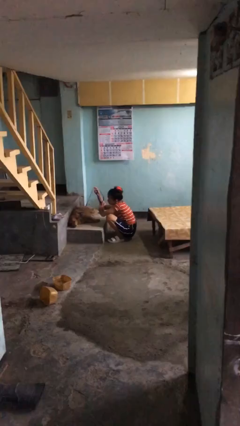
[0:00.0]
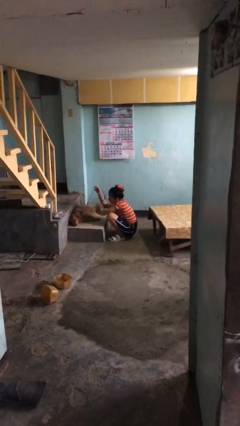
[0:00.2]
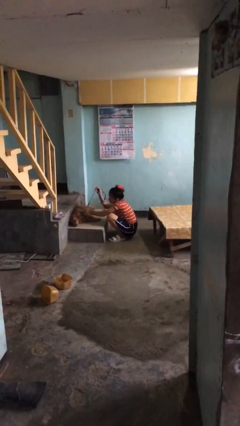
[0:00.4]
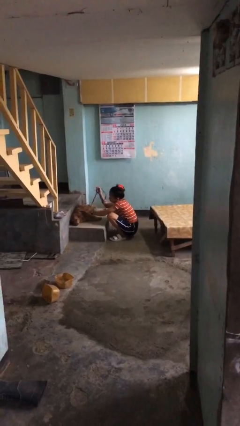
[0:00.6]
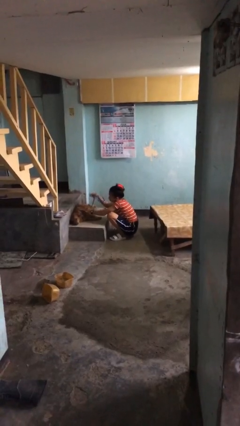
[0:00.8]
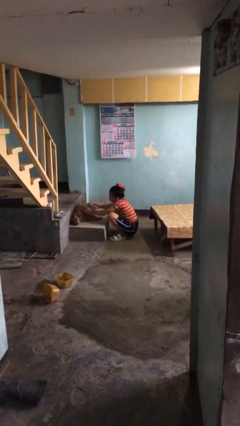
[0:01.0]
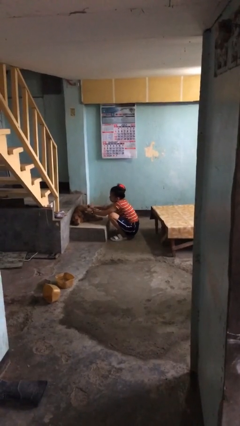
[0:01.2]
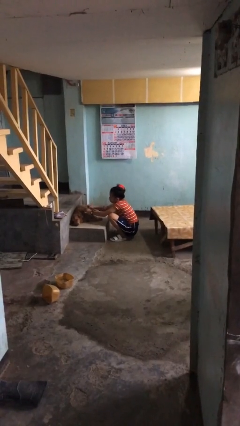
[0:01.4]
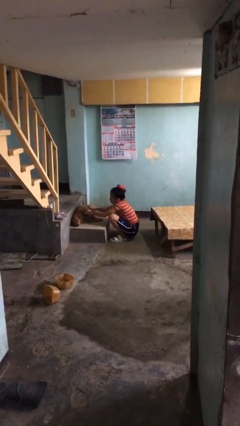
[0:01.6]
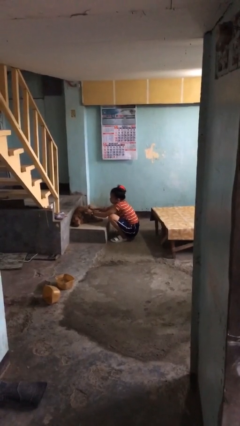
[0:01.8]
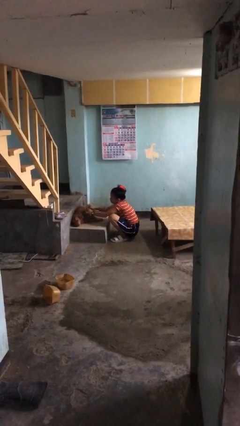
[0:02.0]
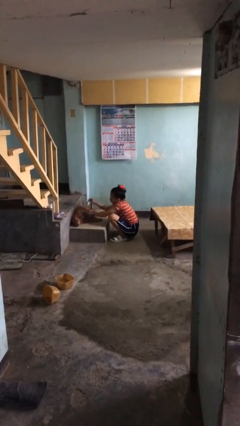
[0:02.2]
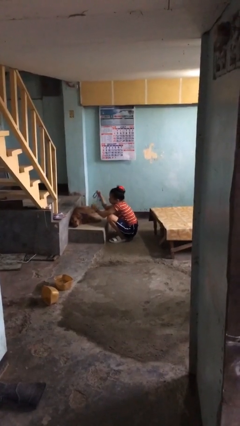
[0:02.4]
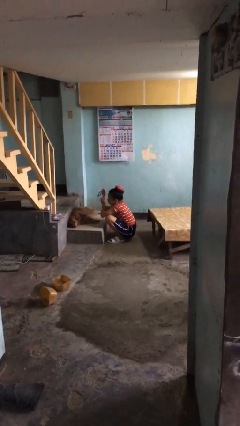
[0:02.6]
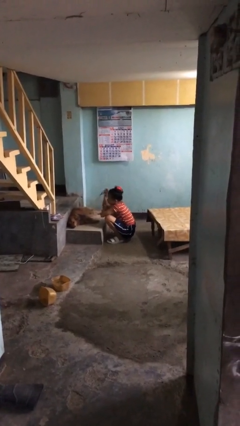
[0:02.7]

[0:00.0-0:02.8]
person unattaches leash from dog

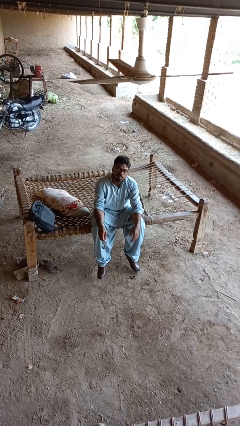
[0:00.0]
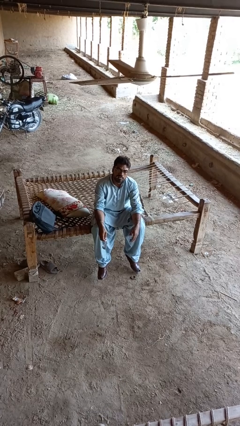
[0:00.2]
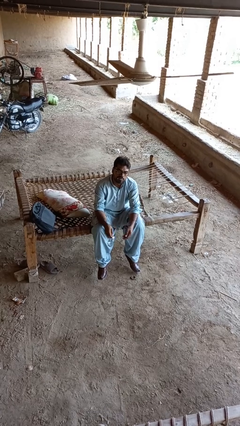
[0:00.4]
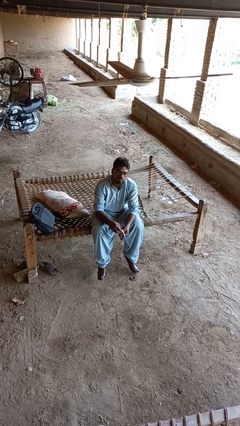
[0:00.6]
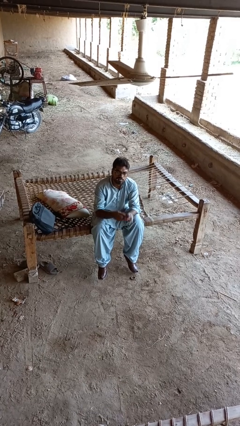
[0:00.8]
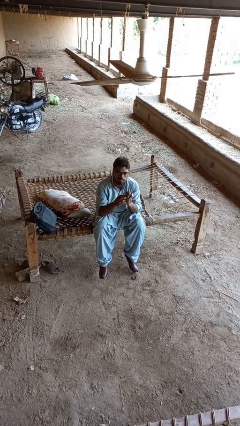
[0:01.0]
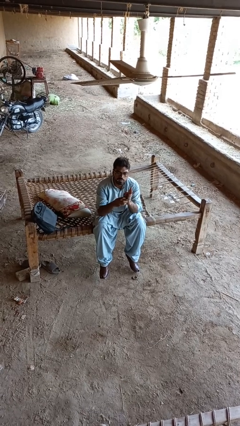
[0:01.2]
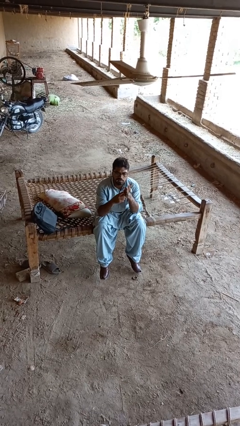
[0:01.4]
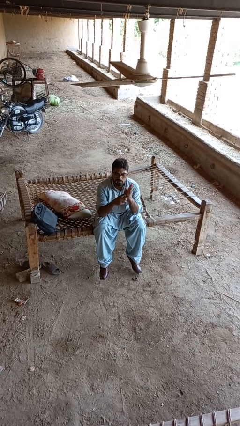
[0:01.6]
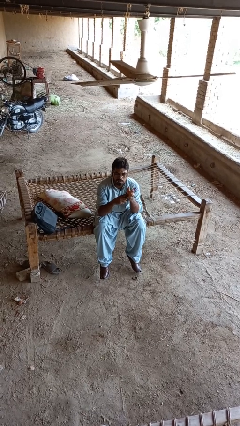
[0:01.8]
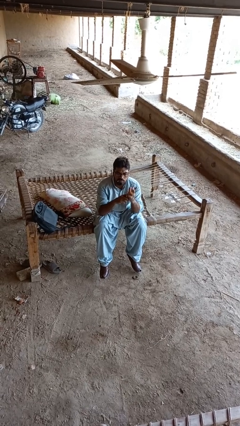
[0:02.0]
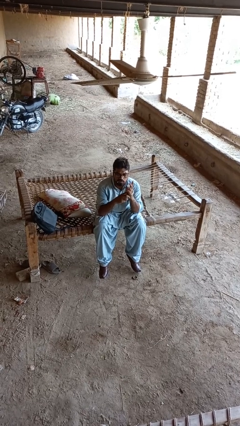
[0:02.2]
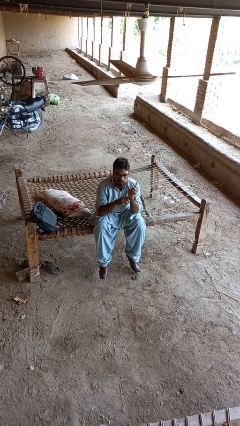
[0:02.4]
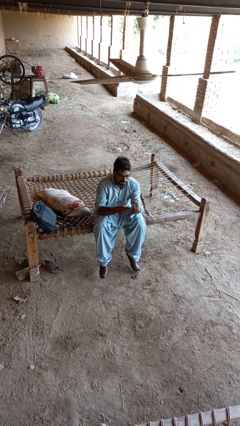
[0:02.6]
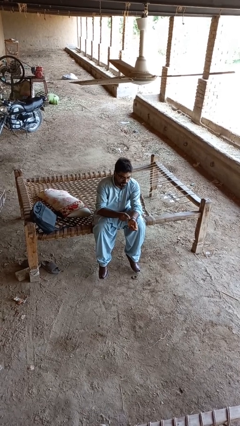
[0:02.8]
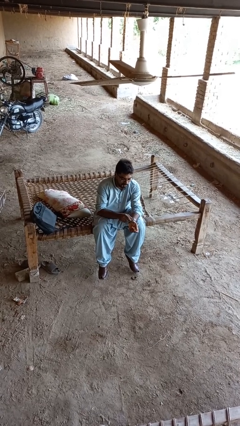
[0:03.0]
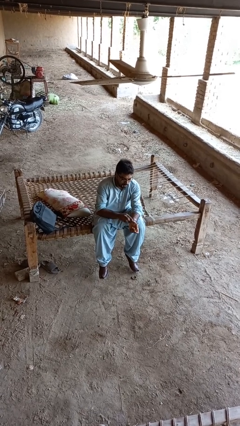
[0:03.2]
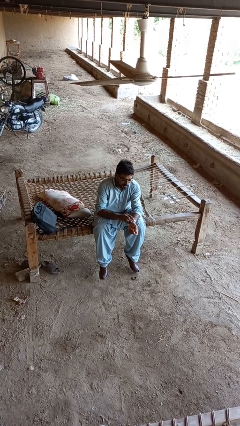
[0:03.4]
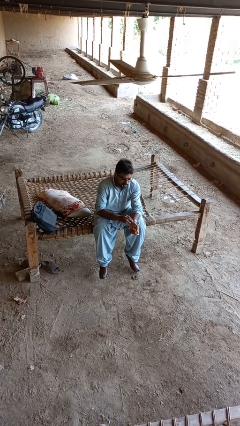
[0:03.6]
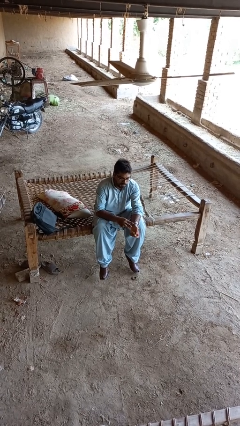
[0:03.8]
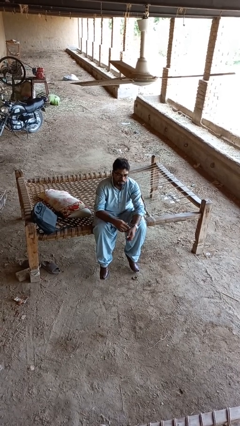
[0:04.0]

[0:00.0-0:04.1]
person puts on wristwatch

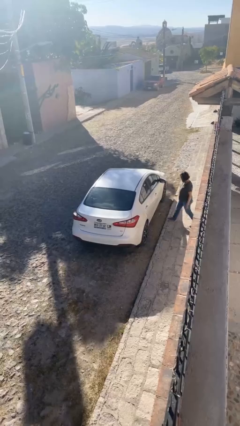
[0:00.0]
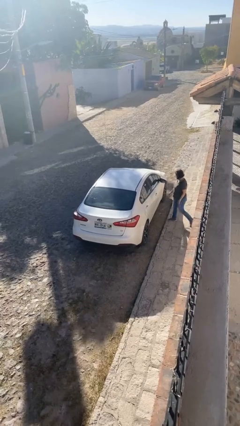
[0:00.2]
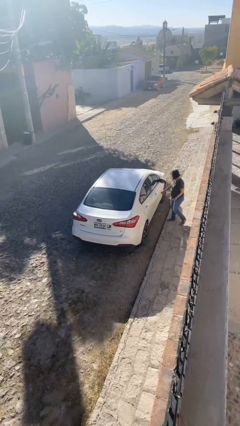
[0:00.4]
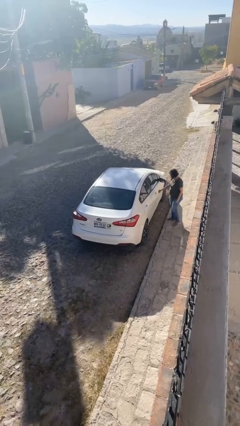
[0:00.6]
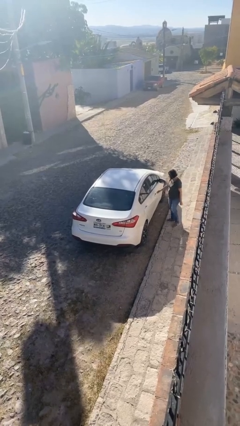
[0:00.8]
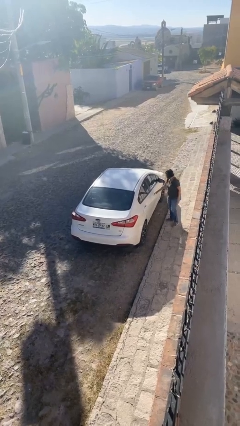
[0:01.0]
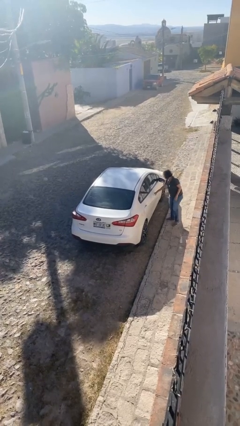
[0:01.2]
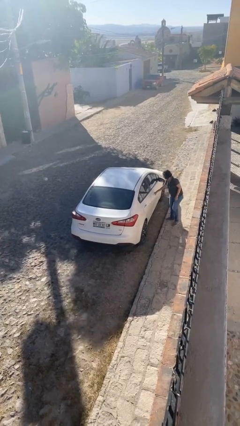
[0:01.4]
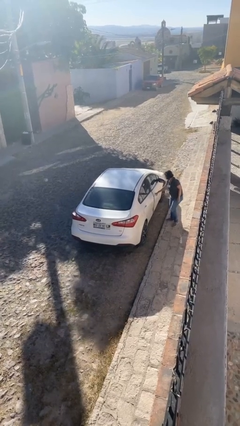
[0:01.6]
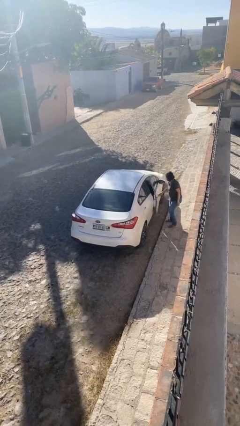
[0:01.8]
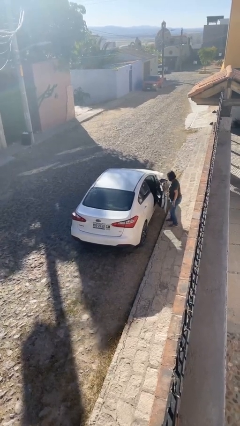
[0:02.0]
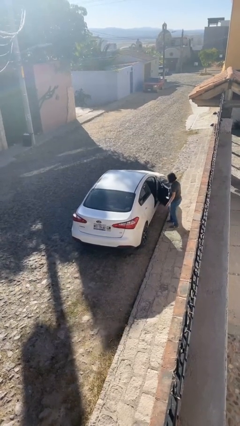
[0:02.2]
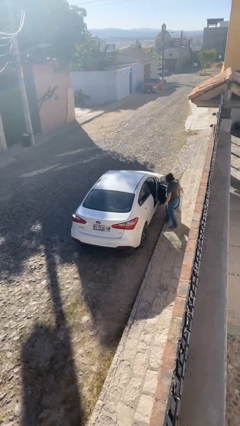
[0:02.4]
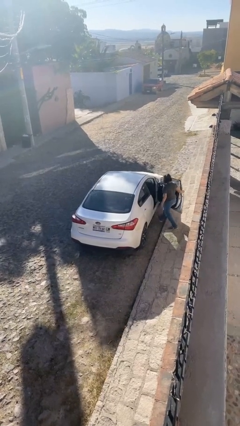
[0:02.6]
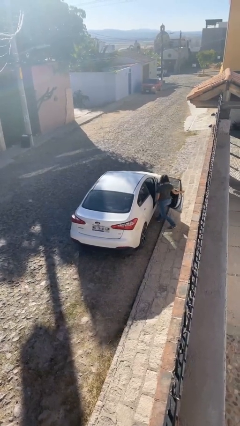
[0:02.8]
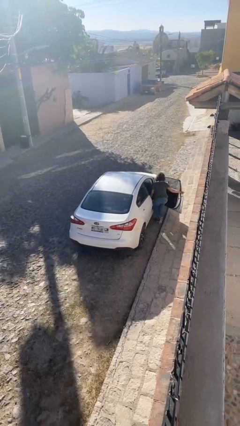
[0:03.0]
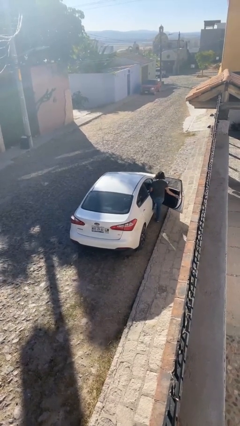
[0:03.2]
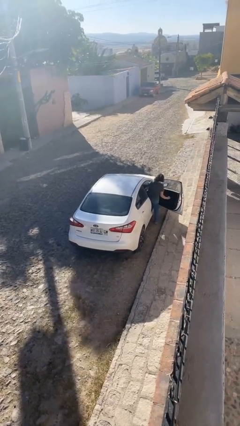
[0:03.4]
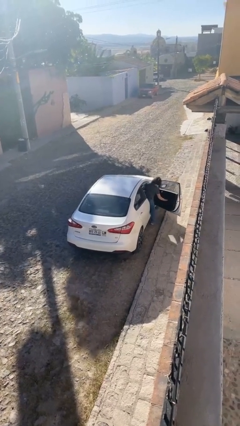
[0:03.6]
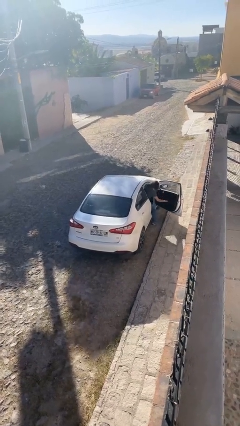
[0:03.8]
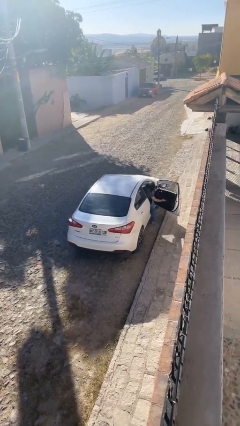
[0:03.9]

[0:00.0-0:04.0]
car picks up person

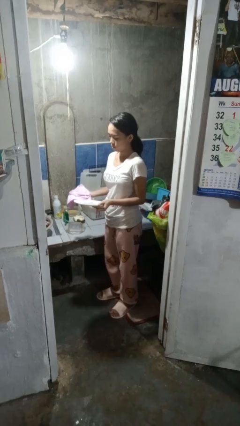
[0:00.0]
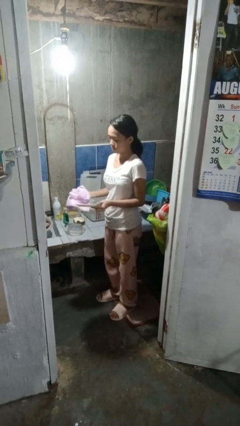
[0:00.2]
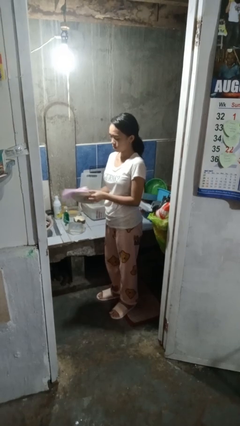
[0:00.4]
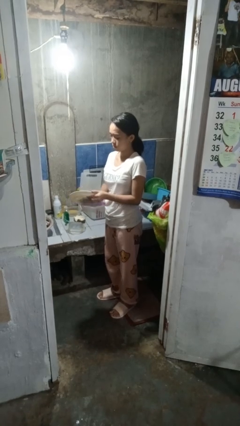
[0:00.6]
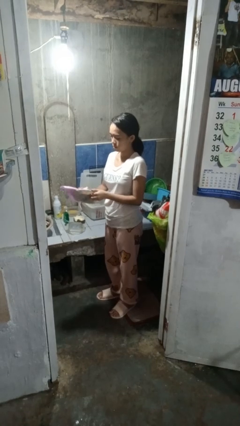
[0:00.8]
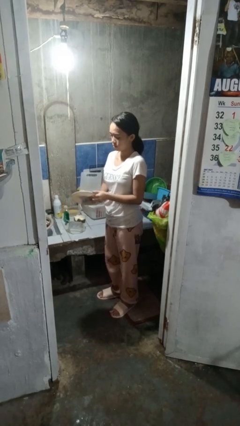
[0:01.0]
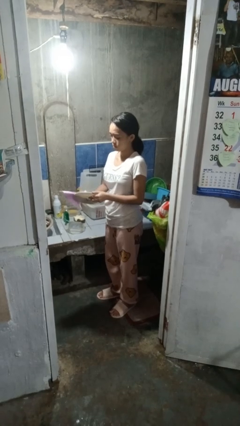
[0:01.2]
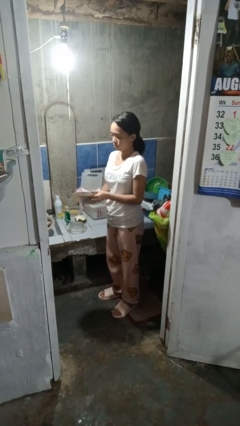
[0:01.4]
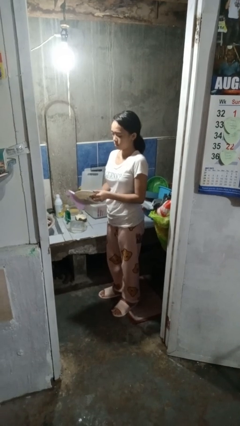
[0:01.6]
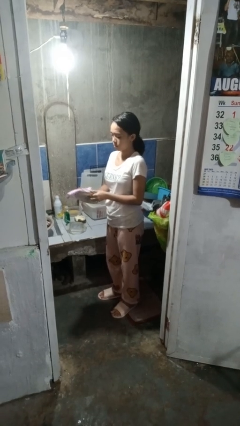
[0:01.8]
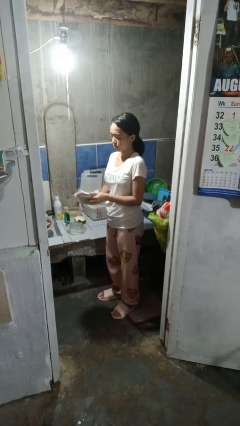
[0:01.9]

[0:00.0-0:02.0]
person dries dish

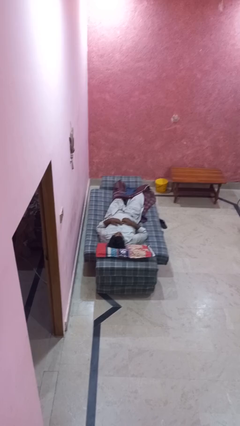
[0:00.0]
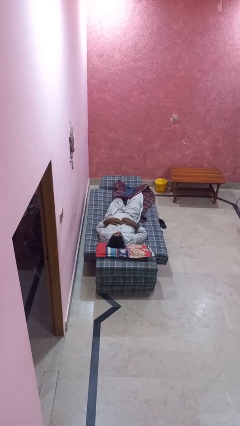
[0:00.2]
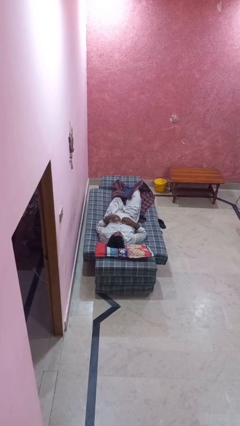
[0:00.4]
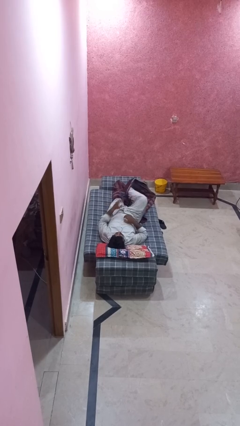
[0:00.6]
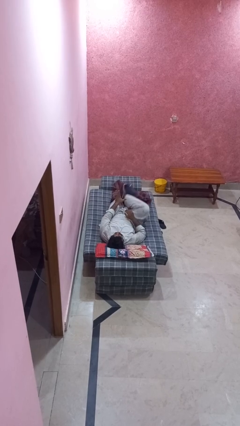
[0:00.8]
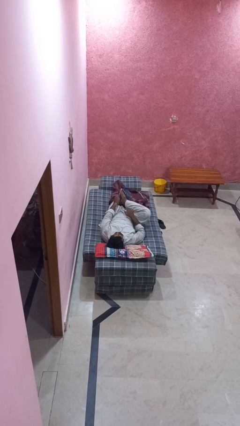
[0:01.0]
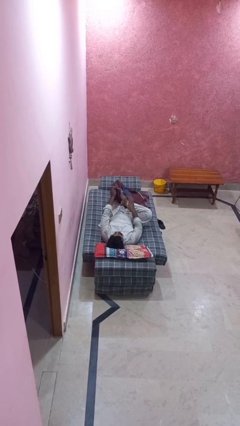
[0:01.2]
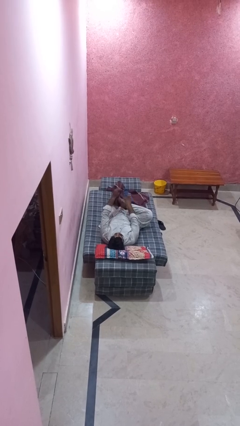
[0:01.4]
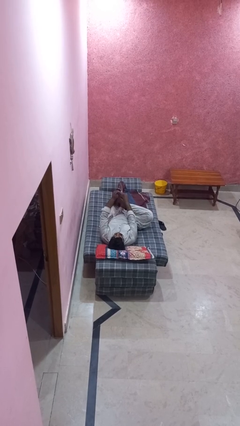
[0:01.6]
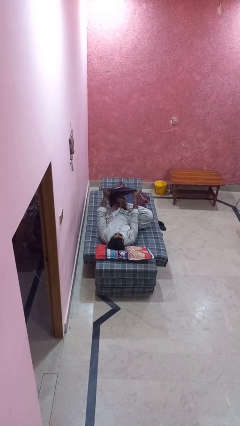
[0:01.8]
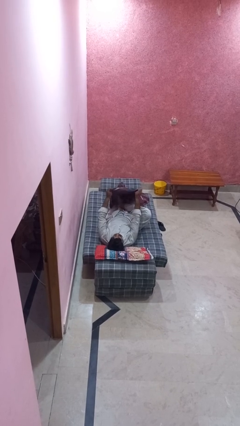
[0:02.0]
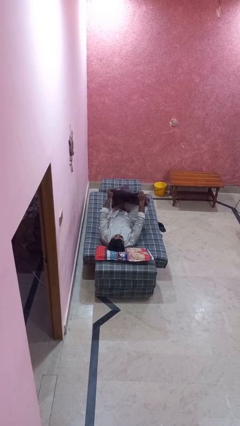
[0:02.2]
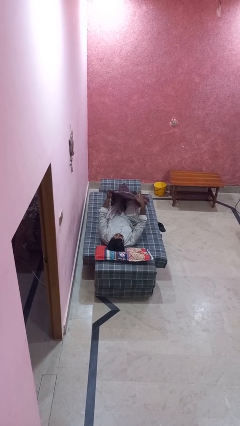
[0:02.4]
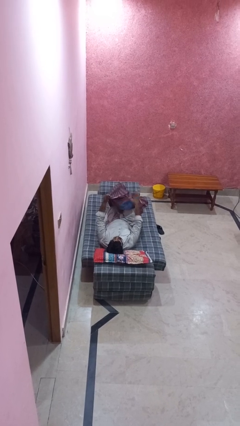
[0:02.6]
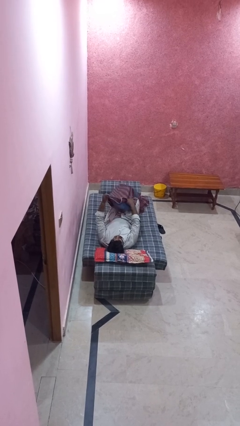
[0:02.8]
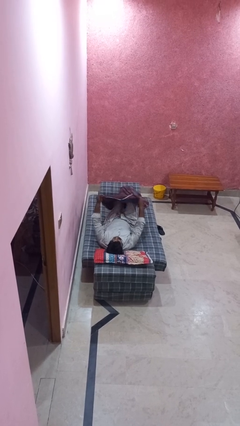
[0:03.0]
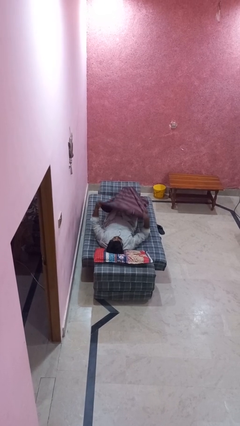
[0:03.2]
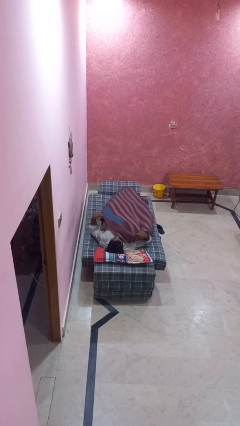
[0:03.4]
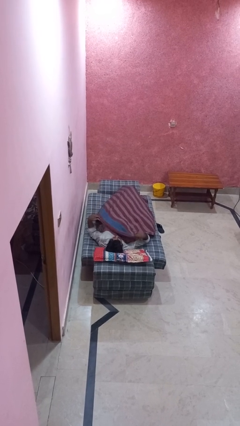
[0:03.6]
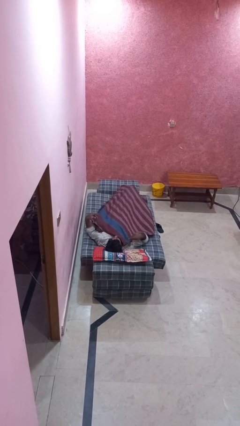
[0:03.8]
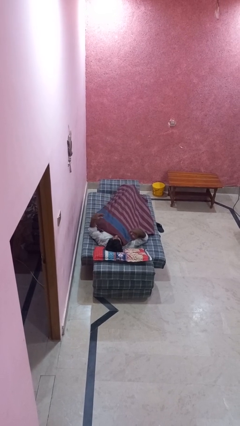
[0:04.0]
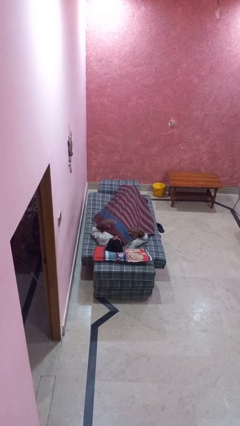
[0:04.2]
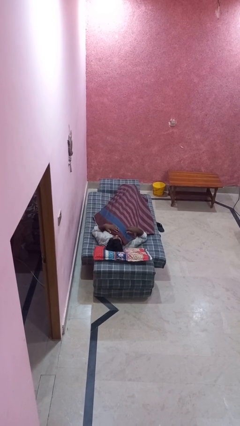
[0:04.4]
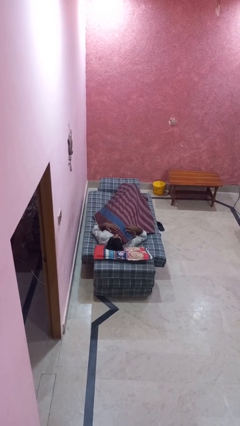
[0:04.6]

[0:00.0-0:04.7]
person covers with bedsheets

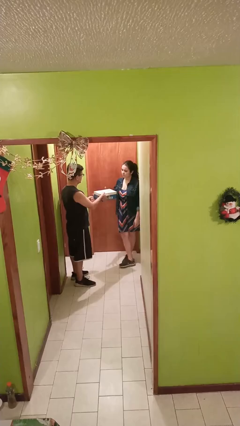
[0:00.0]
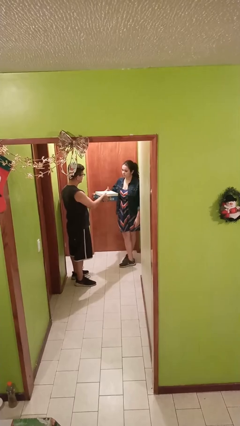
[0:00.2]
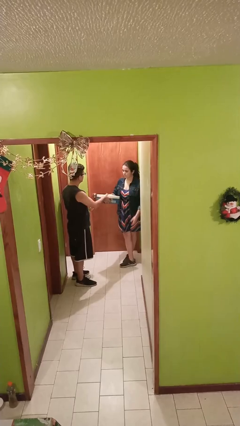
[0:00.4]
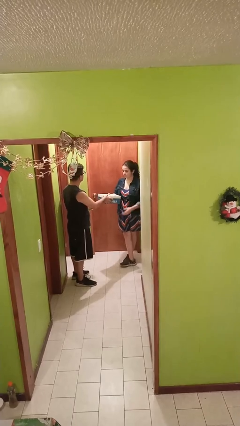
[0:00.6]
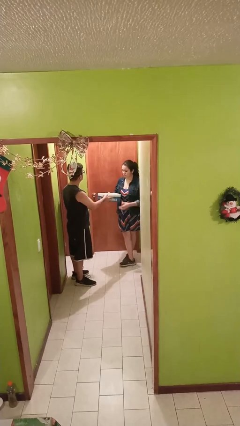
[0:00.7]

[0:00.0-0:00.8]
person transfers object to person
